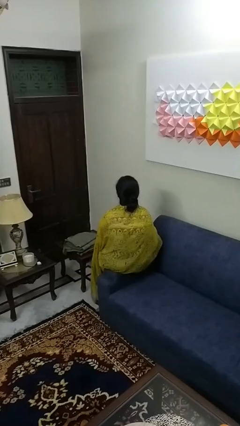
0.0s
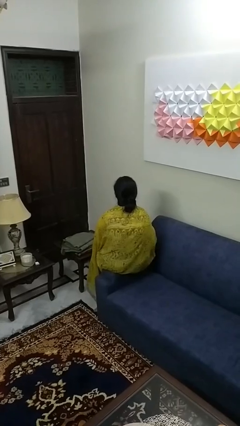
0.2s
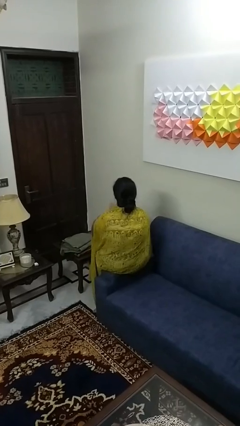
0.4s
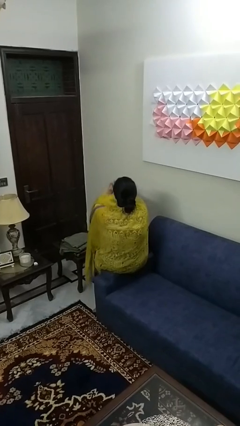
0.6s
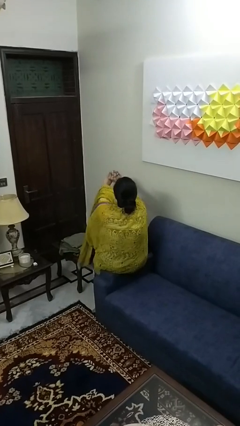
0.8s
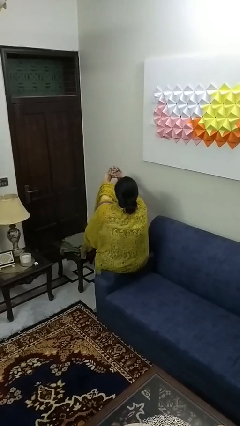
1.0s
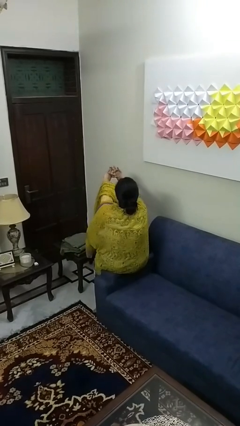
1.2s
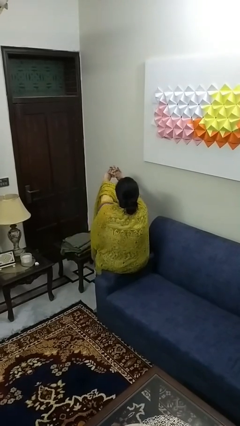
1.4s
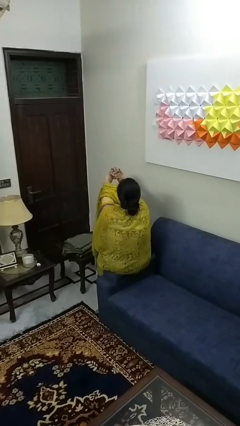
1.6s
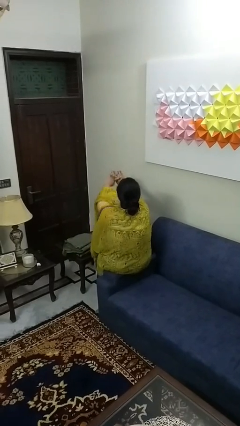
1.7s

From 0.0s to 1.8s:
person cracks knuckles

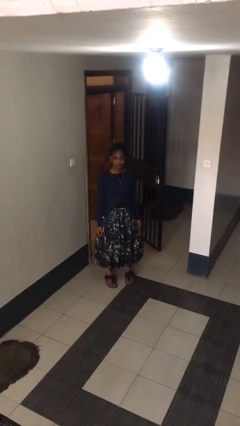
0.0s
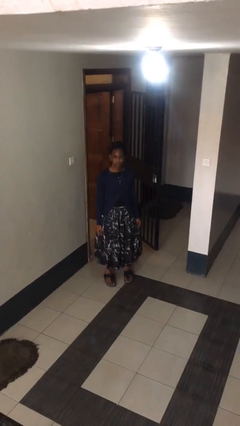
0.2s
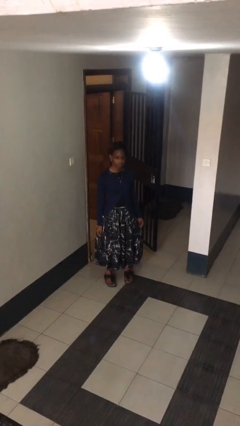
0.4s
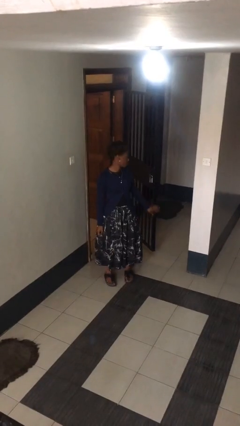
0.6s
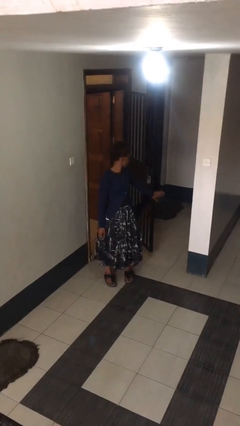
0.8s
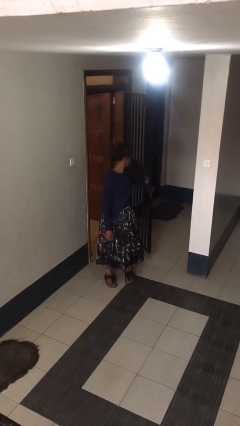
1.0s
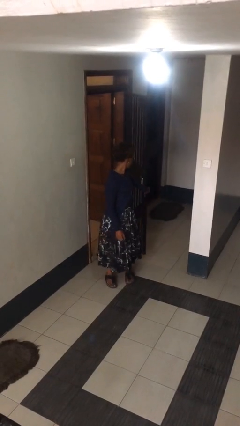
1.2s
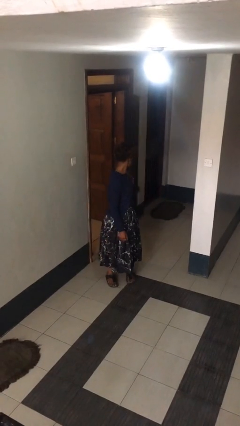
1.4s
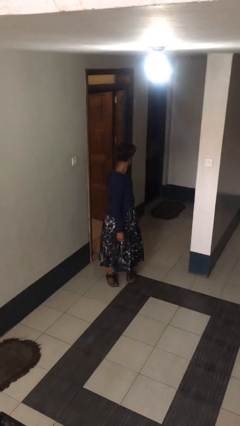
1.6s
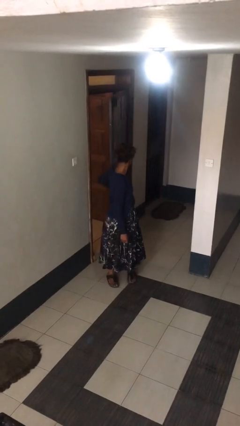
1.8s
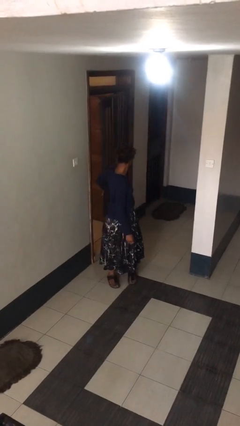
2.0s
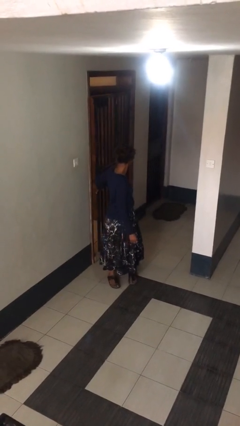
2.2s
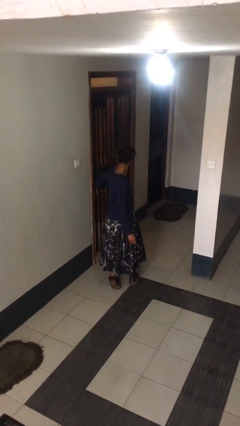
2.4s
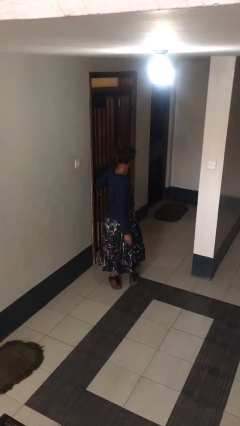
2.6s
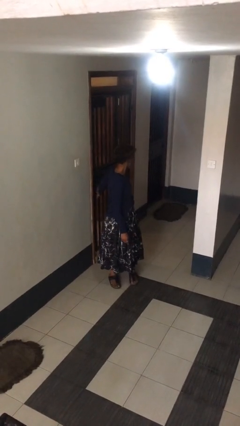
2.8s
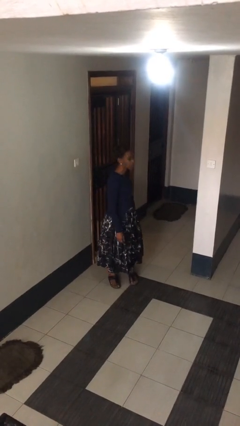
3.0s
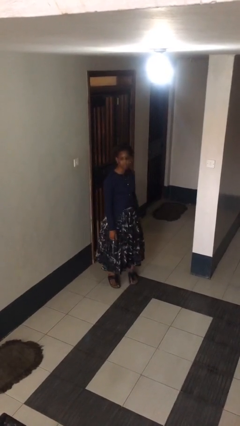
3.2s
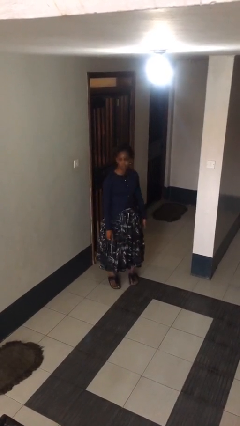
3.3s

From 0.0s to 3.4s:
person closes facility door

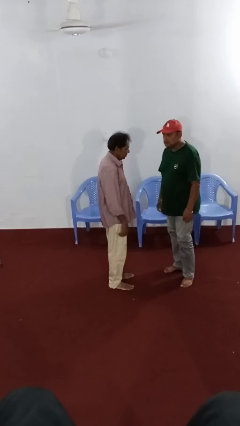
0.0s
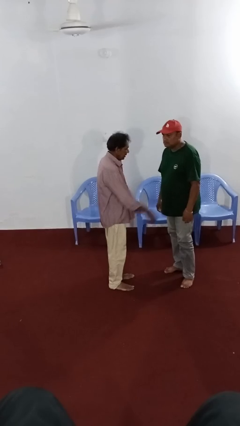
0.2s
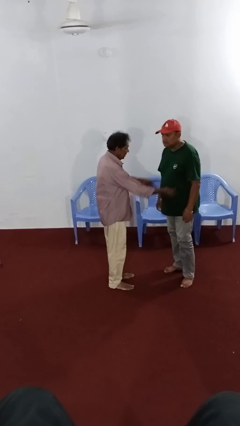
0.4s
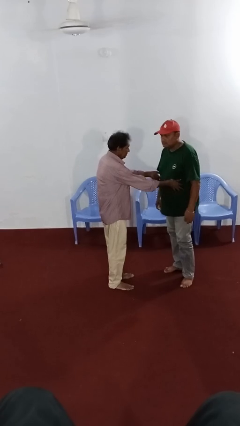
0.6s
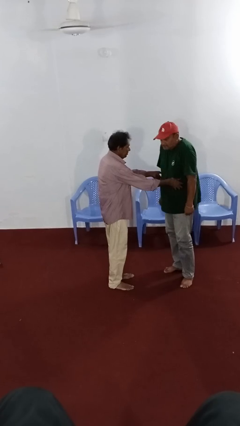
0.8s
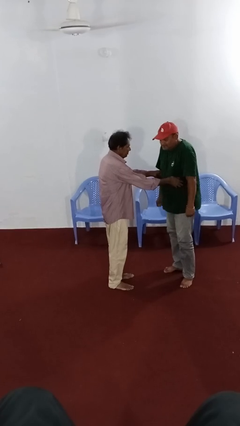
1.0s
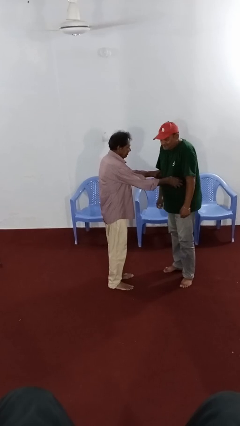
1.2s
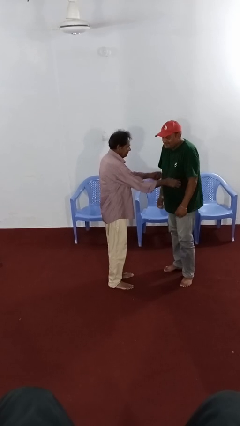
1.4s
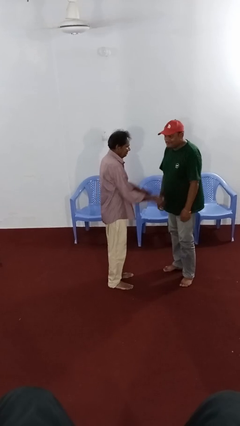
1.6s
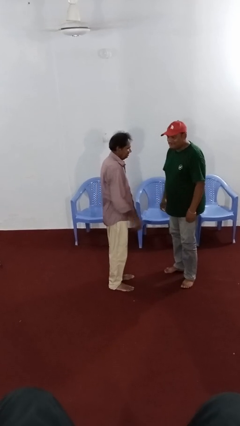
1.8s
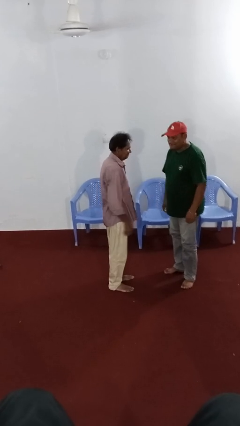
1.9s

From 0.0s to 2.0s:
person tickles person

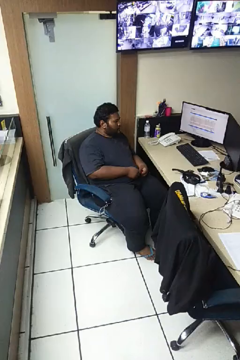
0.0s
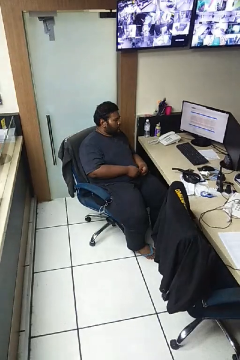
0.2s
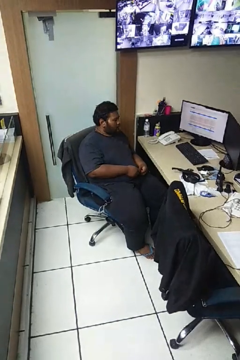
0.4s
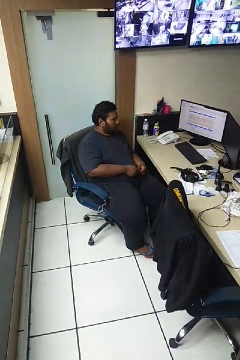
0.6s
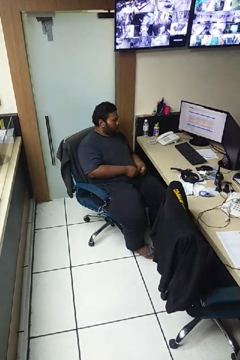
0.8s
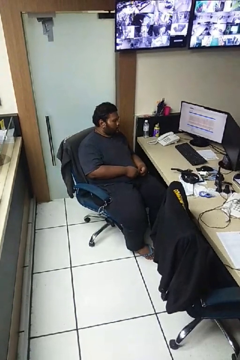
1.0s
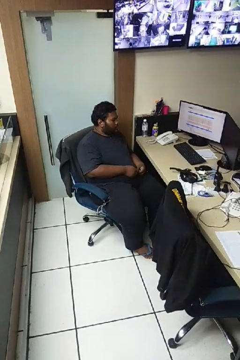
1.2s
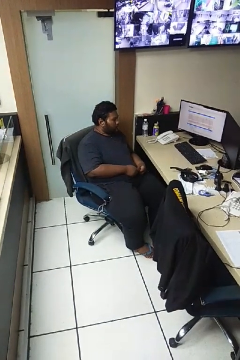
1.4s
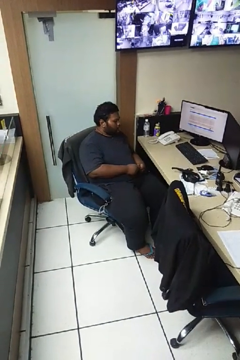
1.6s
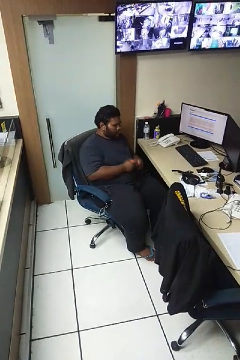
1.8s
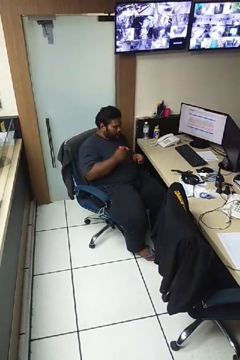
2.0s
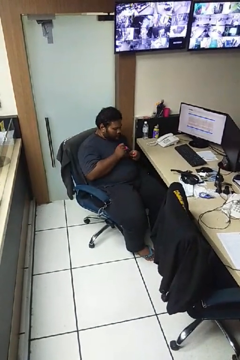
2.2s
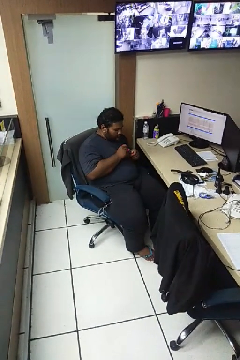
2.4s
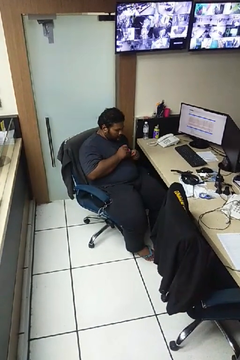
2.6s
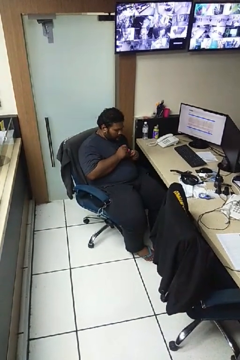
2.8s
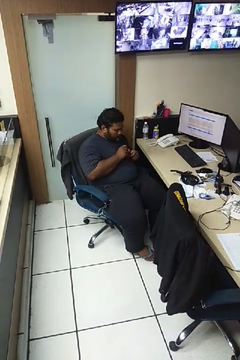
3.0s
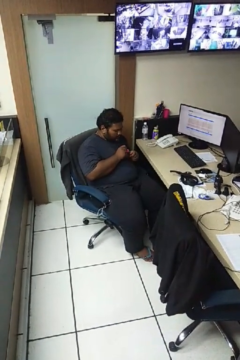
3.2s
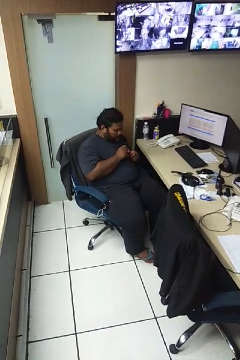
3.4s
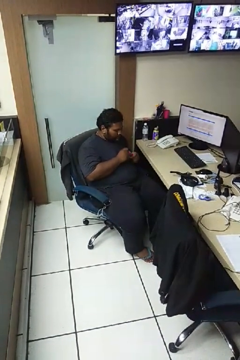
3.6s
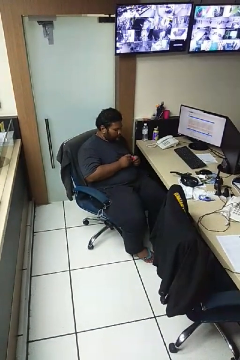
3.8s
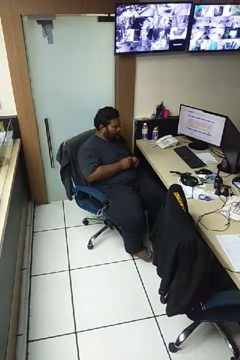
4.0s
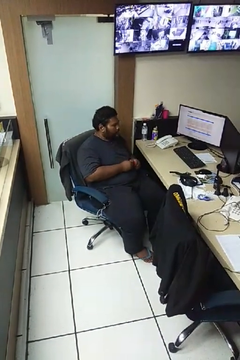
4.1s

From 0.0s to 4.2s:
person paints fingernails

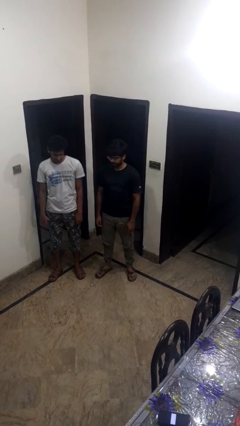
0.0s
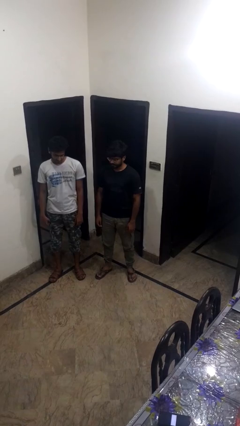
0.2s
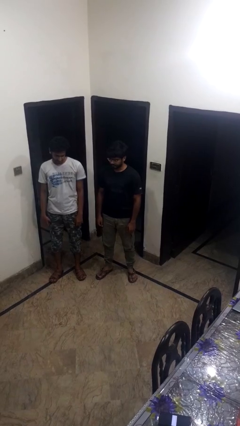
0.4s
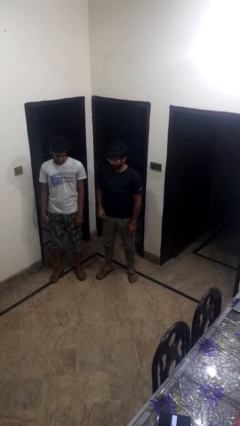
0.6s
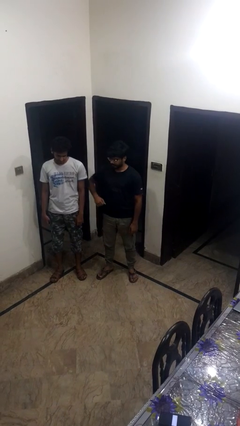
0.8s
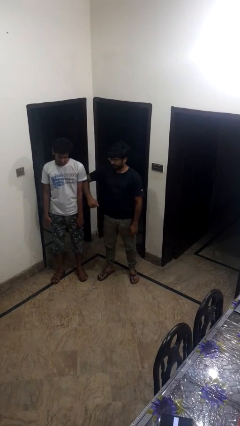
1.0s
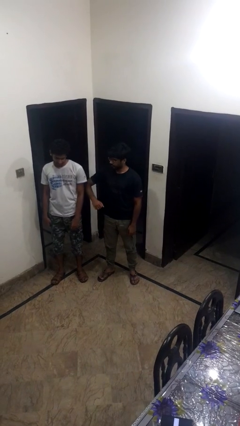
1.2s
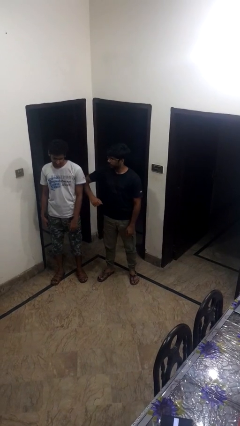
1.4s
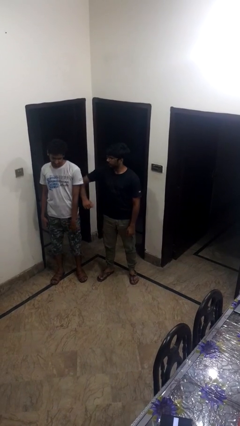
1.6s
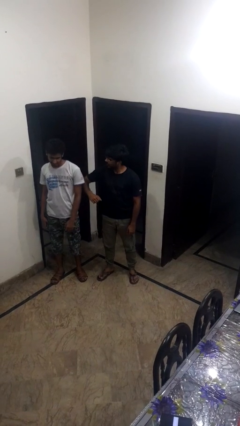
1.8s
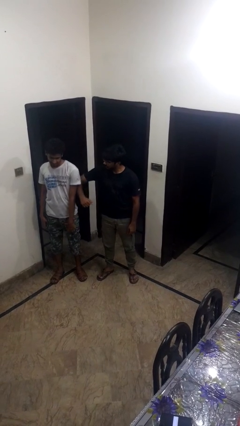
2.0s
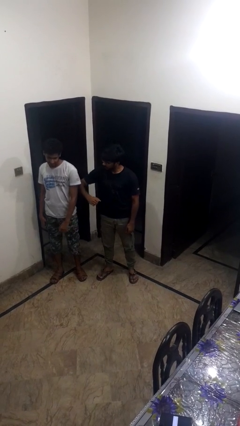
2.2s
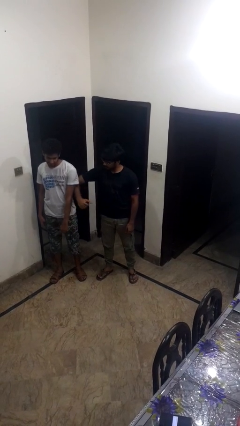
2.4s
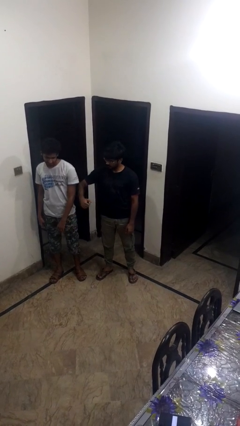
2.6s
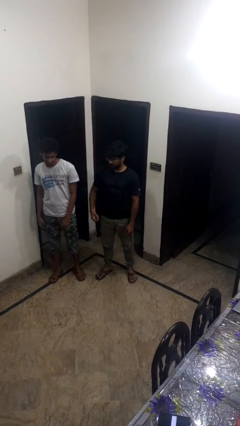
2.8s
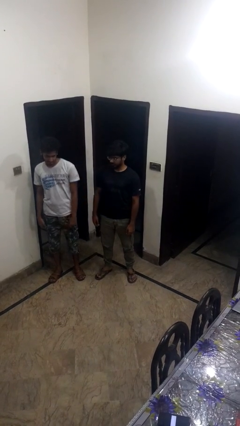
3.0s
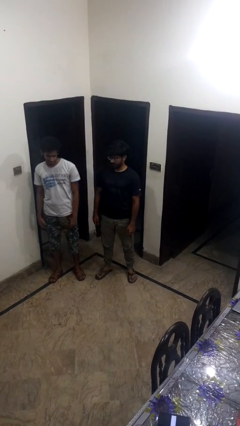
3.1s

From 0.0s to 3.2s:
person nudges person with elbow

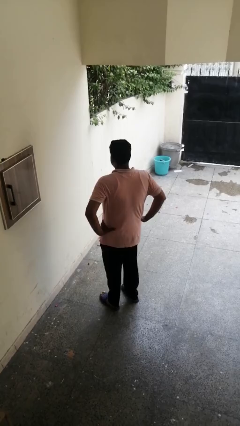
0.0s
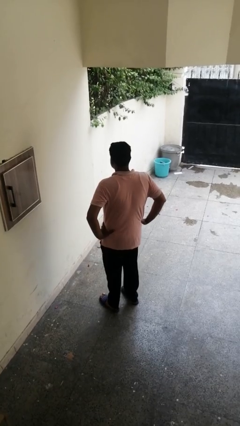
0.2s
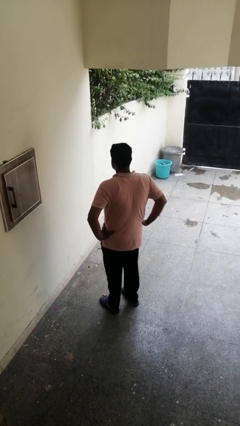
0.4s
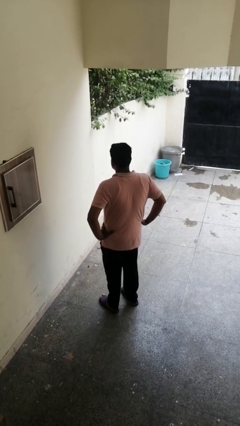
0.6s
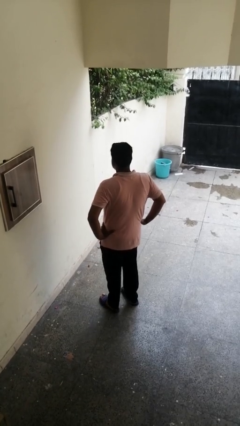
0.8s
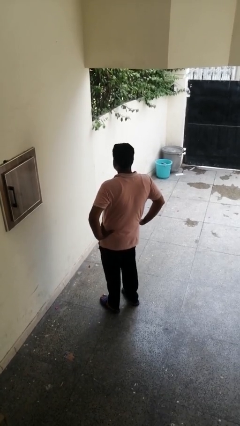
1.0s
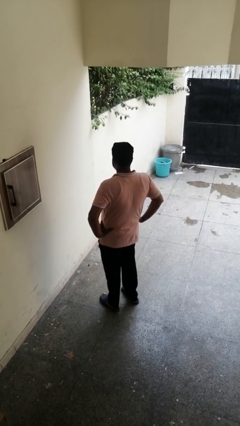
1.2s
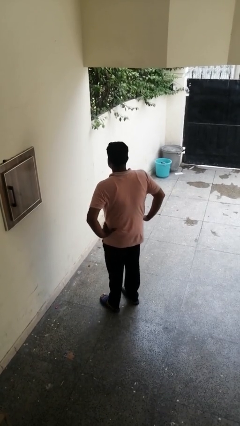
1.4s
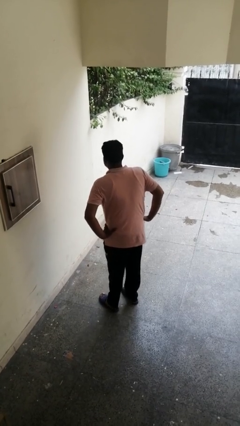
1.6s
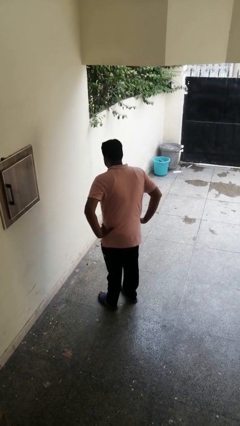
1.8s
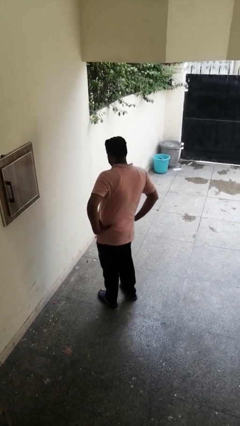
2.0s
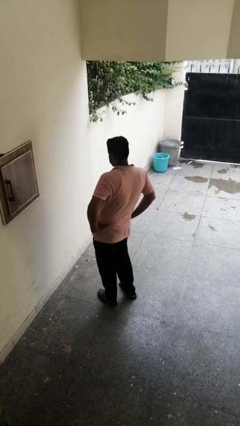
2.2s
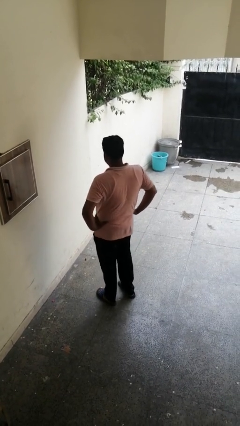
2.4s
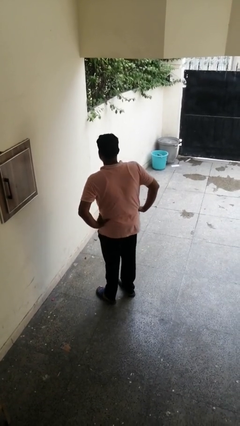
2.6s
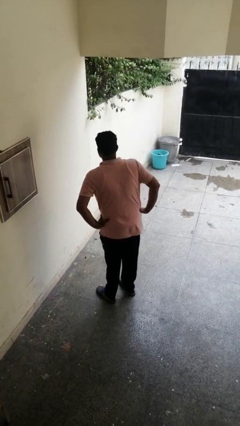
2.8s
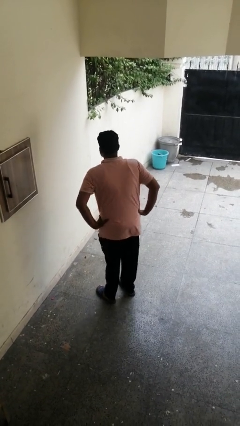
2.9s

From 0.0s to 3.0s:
person wiggles hips
